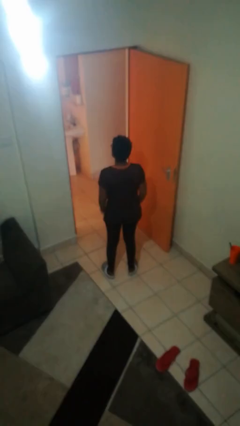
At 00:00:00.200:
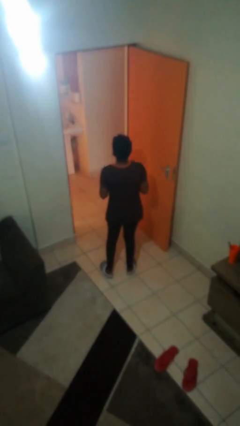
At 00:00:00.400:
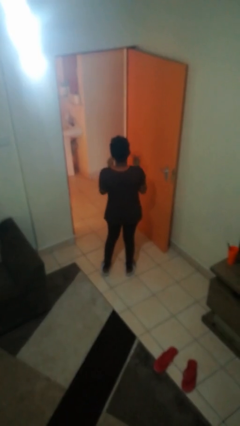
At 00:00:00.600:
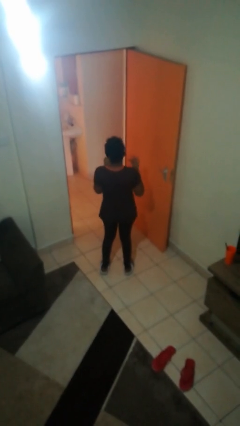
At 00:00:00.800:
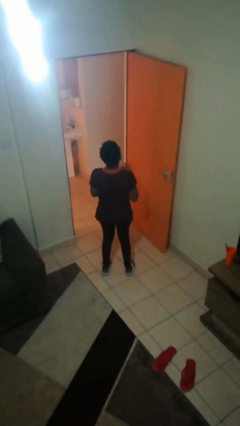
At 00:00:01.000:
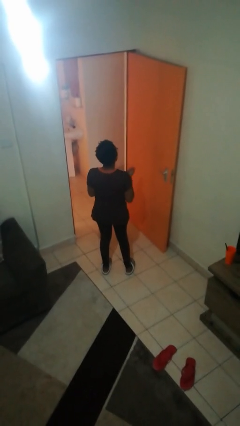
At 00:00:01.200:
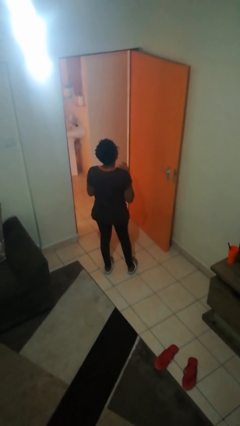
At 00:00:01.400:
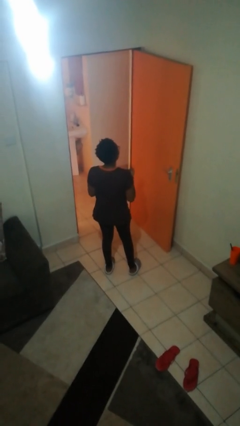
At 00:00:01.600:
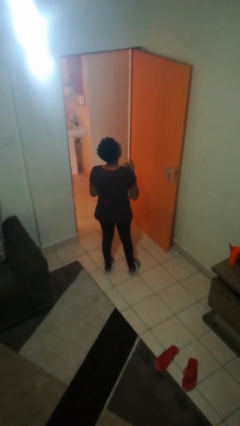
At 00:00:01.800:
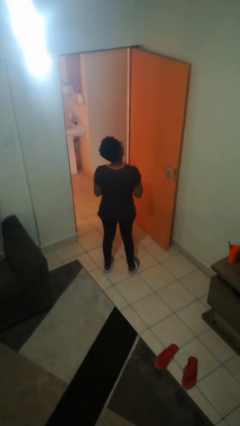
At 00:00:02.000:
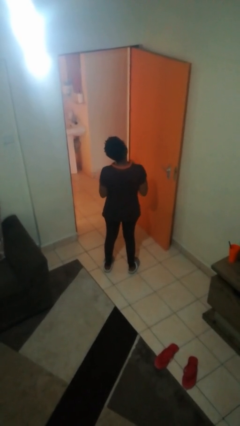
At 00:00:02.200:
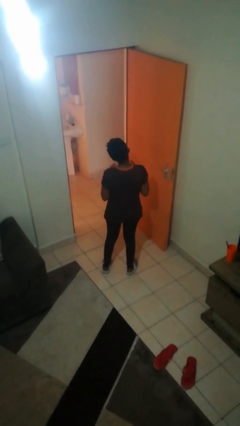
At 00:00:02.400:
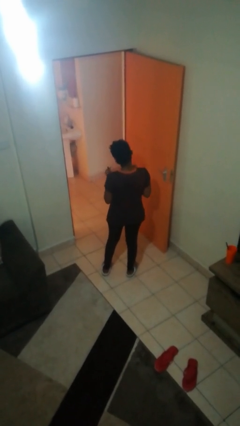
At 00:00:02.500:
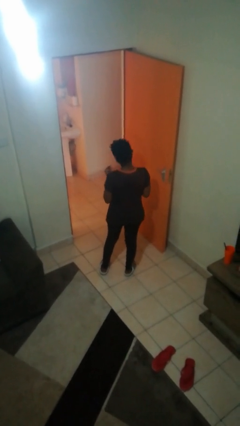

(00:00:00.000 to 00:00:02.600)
person snaps fingers

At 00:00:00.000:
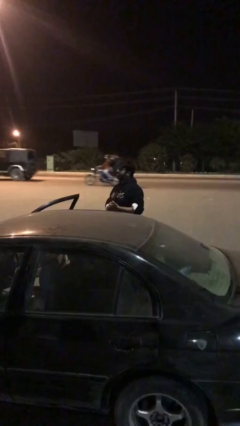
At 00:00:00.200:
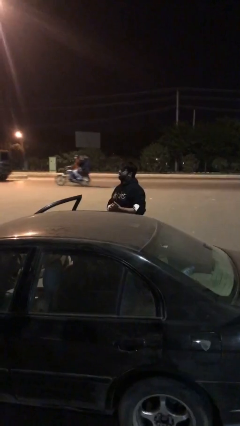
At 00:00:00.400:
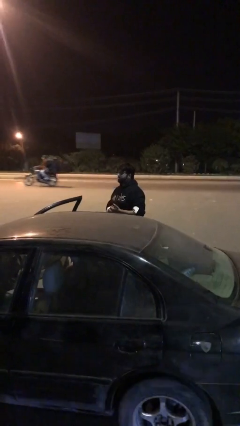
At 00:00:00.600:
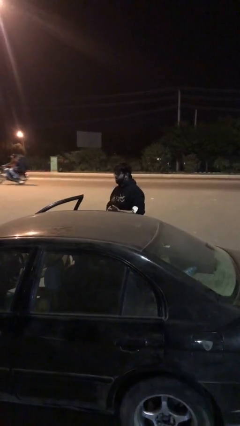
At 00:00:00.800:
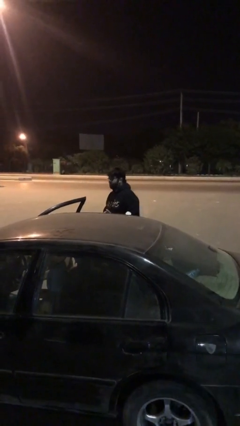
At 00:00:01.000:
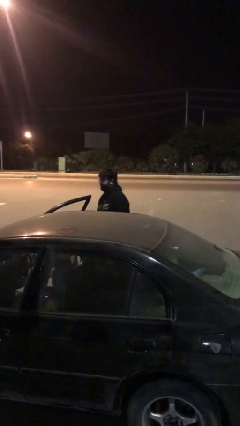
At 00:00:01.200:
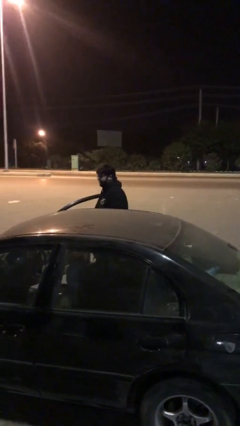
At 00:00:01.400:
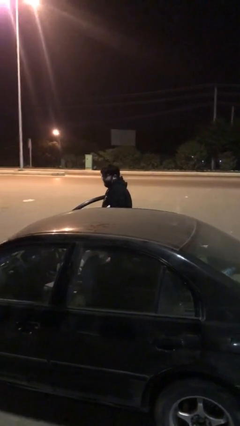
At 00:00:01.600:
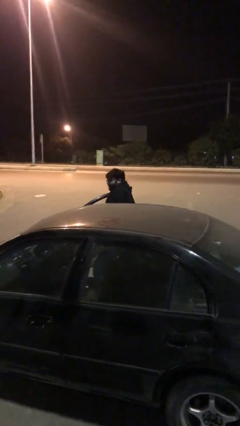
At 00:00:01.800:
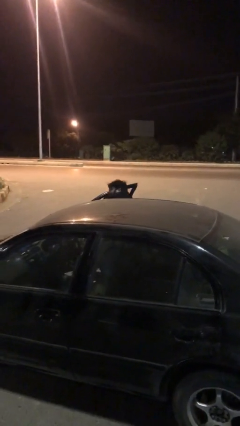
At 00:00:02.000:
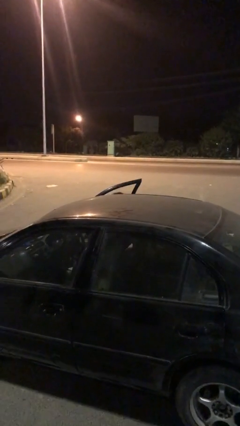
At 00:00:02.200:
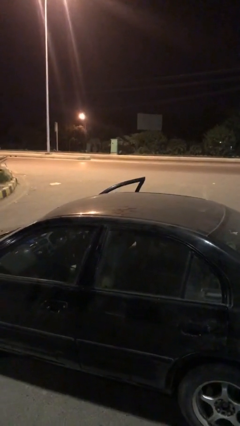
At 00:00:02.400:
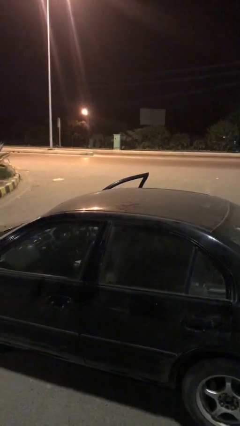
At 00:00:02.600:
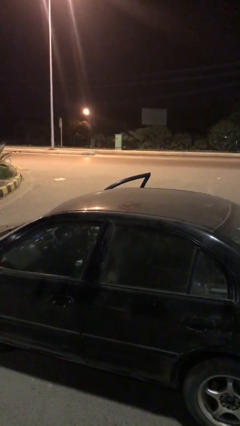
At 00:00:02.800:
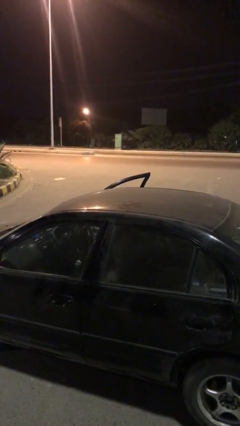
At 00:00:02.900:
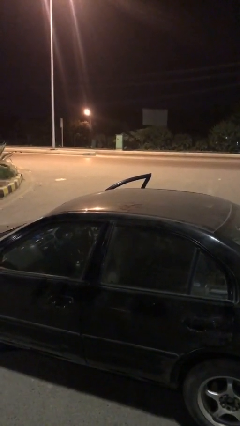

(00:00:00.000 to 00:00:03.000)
person enters car

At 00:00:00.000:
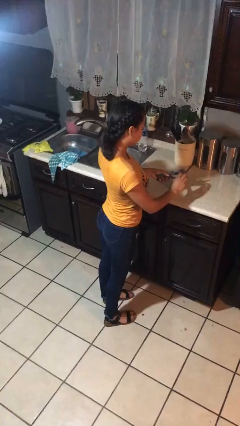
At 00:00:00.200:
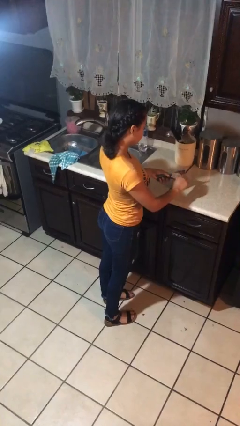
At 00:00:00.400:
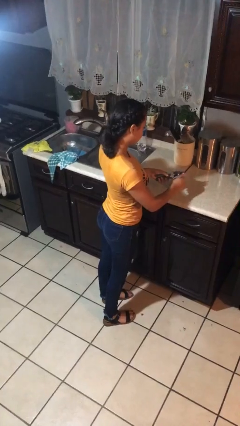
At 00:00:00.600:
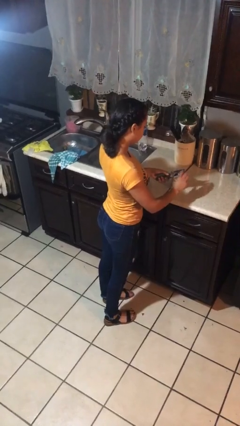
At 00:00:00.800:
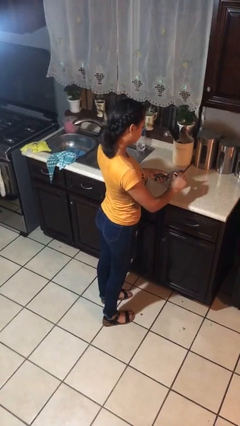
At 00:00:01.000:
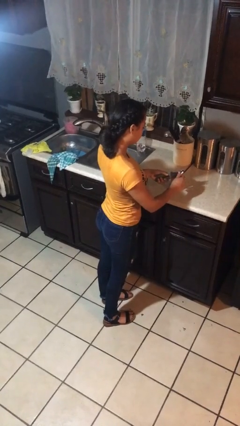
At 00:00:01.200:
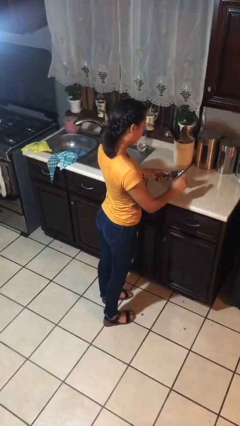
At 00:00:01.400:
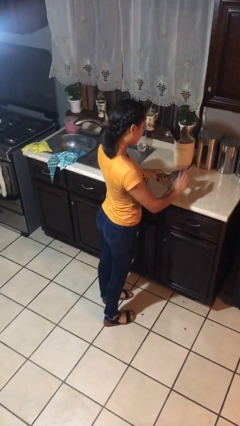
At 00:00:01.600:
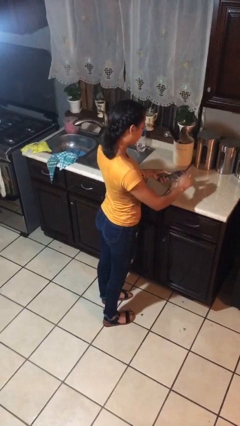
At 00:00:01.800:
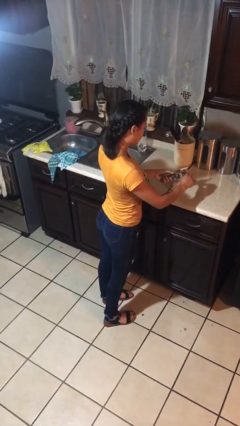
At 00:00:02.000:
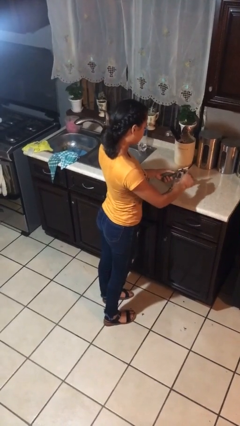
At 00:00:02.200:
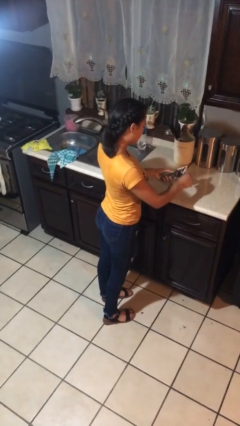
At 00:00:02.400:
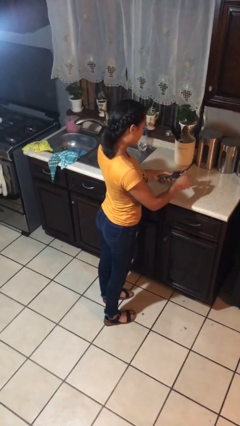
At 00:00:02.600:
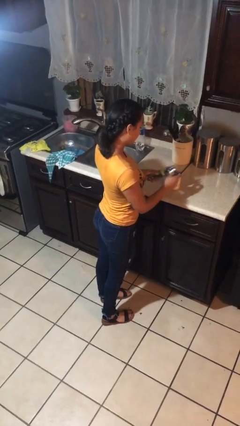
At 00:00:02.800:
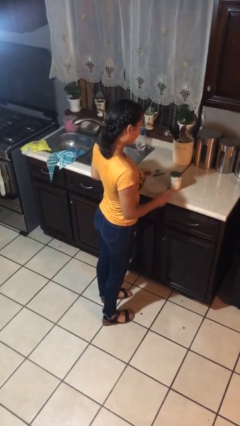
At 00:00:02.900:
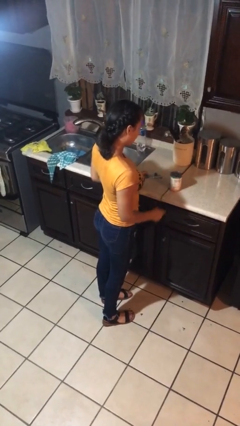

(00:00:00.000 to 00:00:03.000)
person opens can with can opener

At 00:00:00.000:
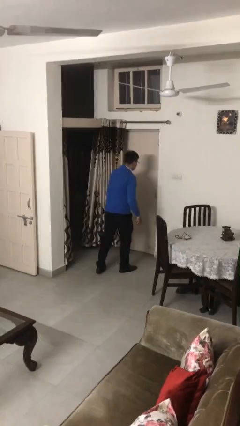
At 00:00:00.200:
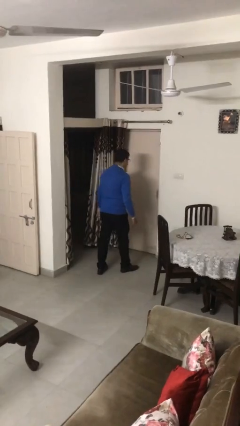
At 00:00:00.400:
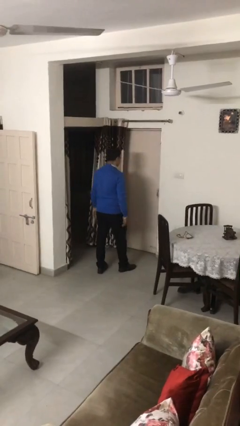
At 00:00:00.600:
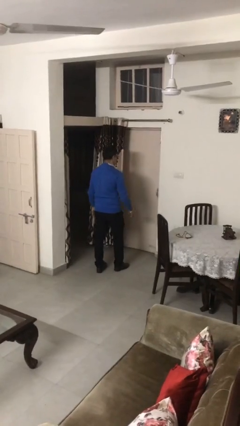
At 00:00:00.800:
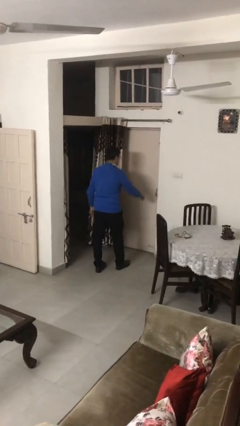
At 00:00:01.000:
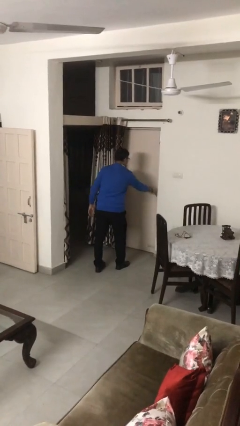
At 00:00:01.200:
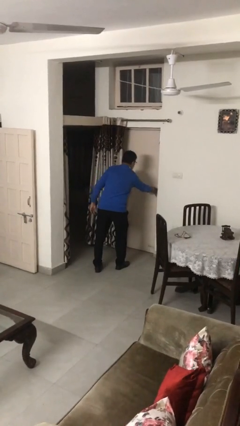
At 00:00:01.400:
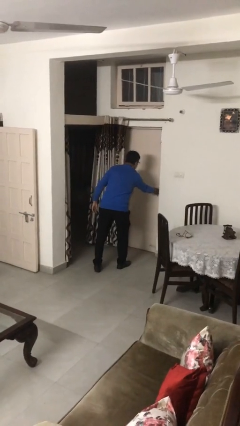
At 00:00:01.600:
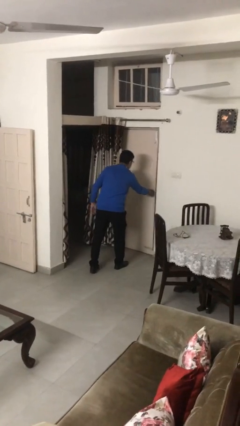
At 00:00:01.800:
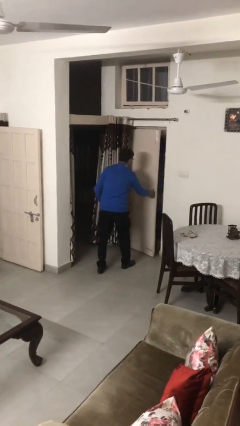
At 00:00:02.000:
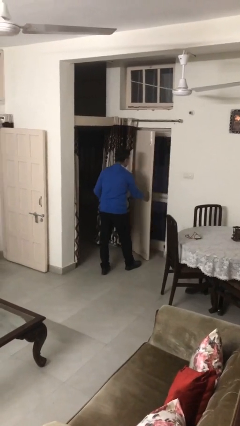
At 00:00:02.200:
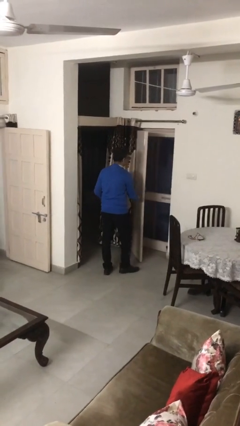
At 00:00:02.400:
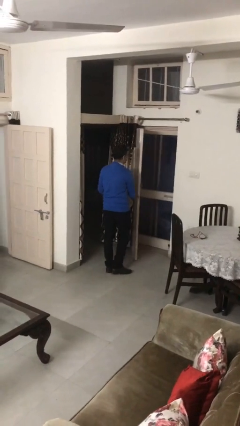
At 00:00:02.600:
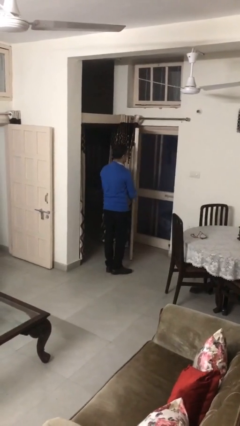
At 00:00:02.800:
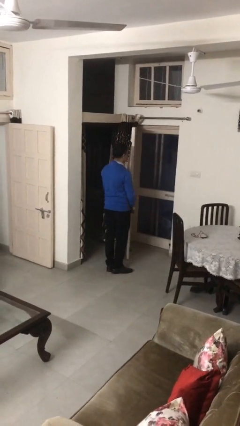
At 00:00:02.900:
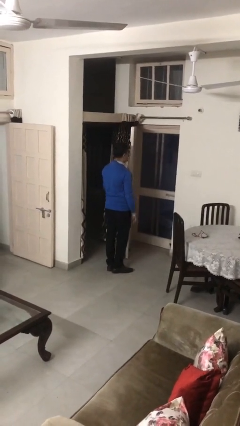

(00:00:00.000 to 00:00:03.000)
person opens facility door

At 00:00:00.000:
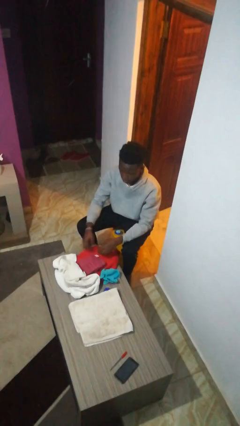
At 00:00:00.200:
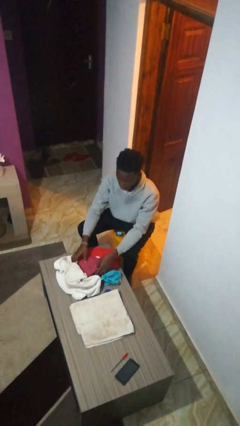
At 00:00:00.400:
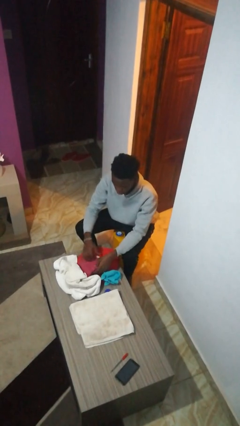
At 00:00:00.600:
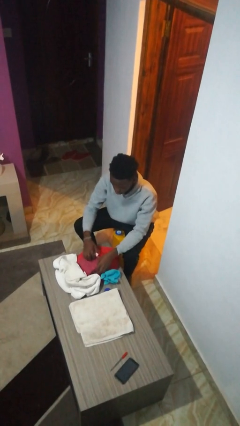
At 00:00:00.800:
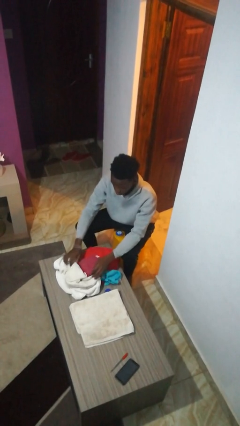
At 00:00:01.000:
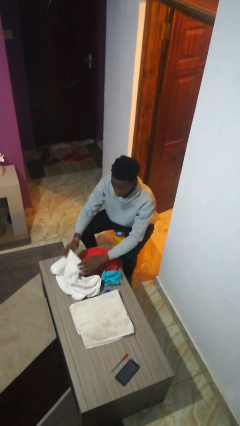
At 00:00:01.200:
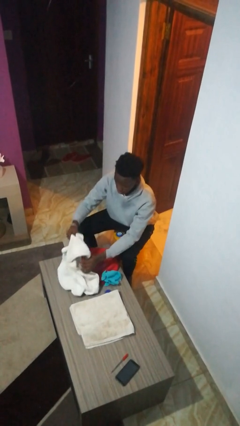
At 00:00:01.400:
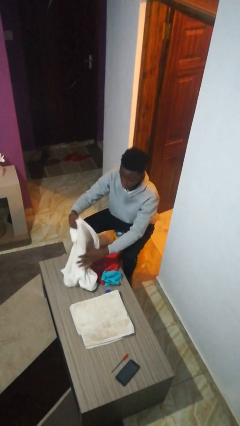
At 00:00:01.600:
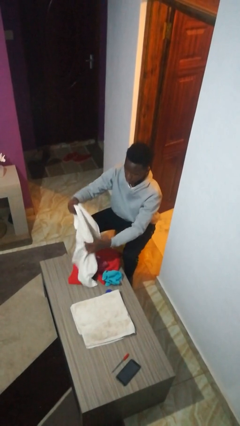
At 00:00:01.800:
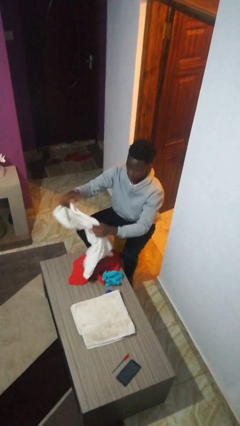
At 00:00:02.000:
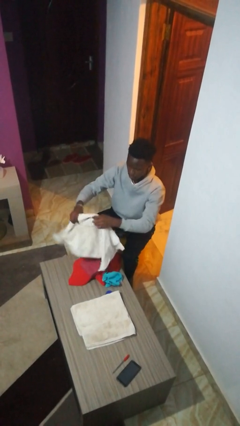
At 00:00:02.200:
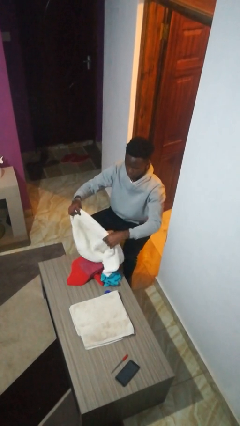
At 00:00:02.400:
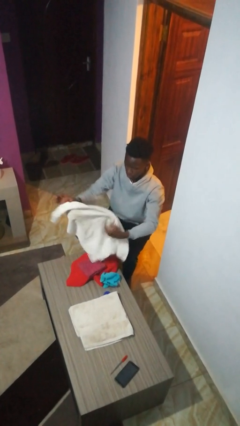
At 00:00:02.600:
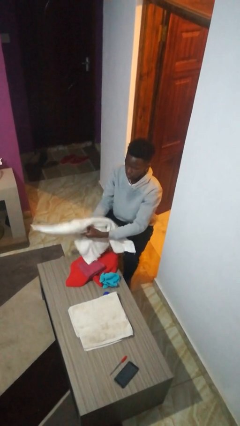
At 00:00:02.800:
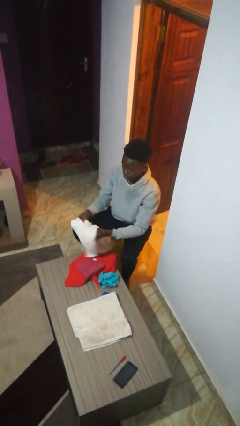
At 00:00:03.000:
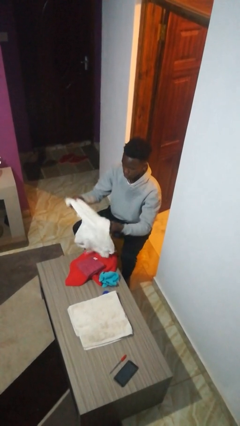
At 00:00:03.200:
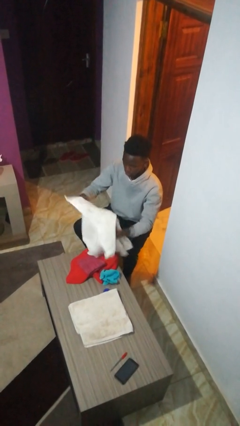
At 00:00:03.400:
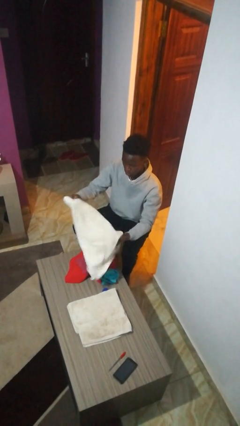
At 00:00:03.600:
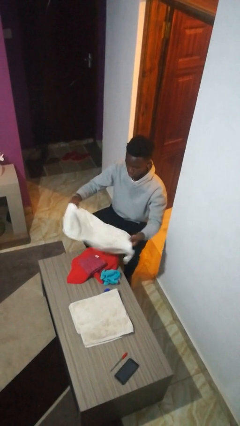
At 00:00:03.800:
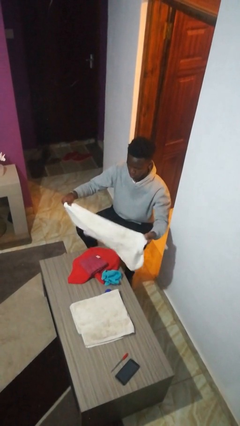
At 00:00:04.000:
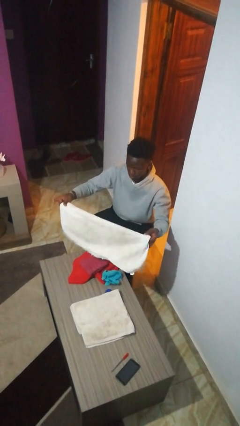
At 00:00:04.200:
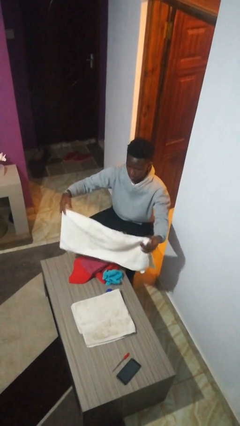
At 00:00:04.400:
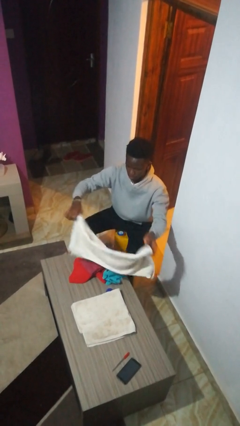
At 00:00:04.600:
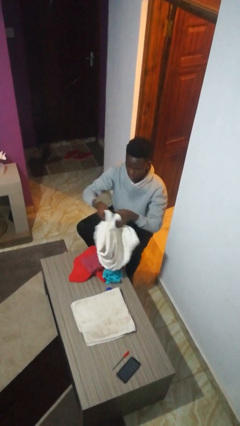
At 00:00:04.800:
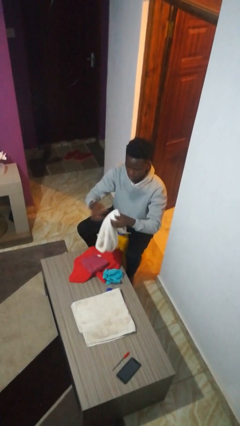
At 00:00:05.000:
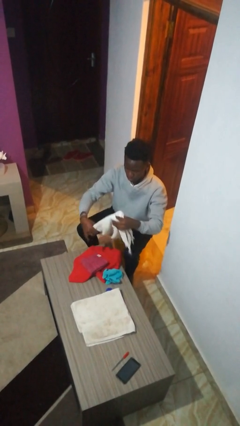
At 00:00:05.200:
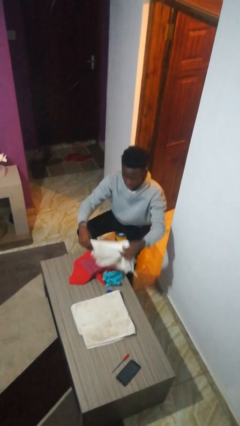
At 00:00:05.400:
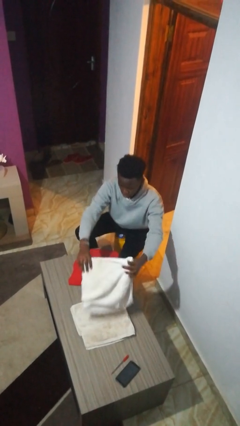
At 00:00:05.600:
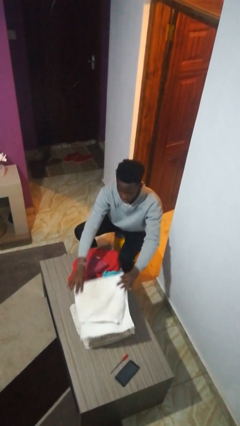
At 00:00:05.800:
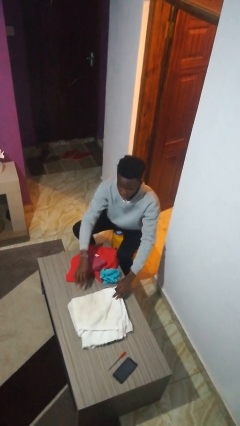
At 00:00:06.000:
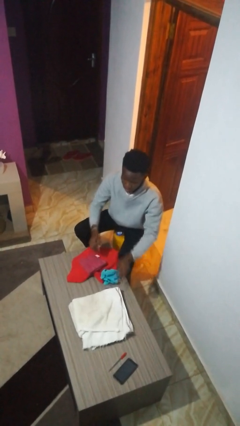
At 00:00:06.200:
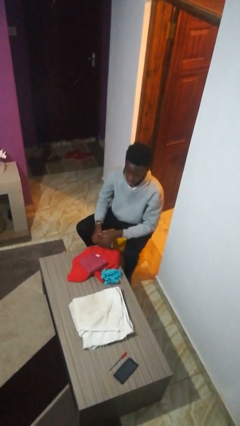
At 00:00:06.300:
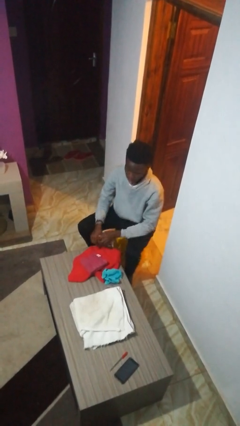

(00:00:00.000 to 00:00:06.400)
person folds towel
